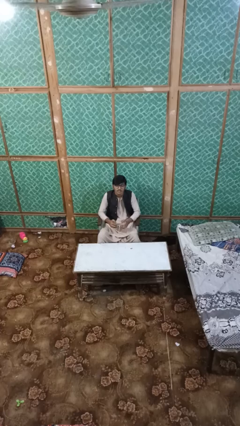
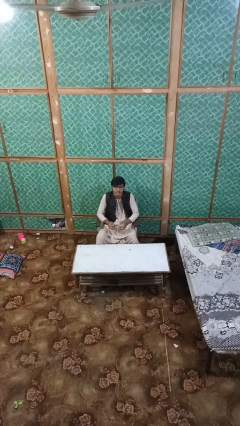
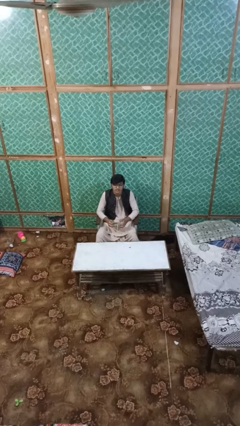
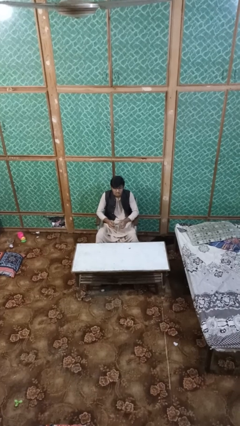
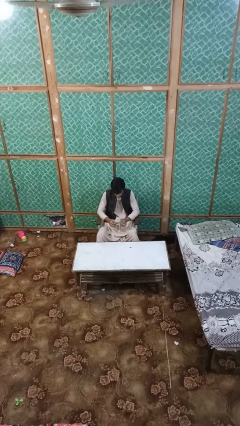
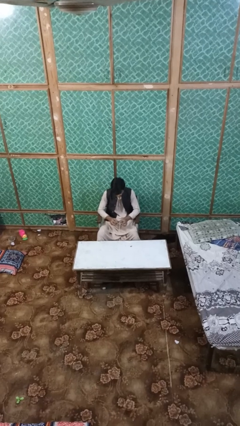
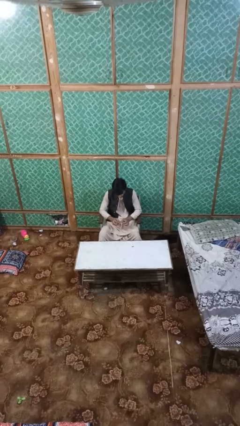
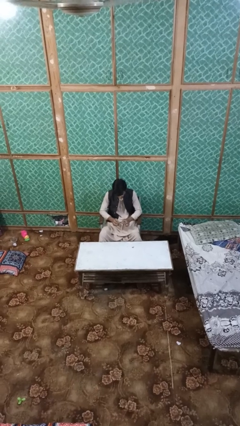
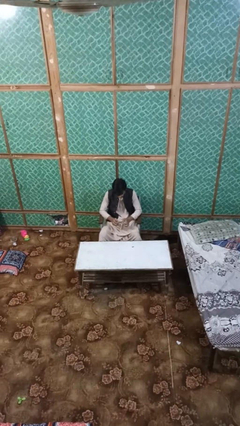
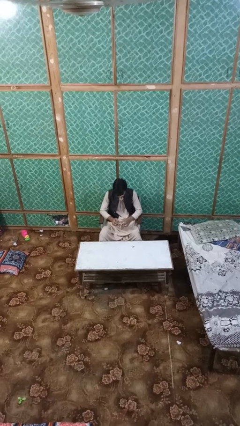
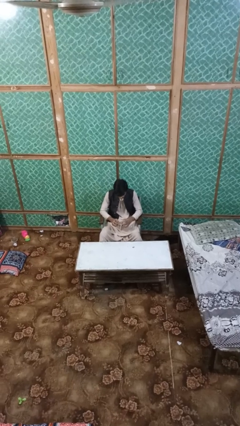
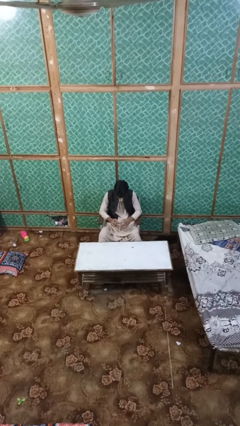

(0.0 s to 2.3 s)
person interacts with handheld game

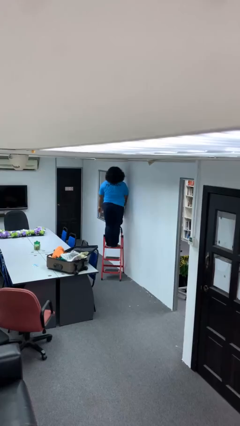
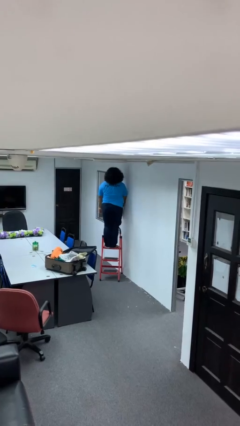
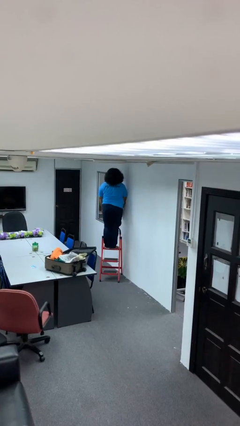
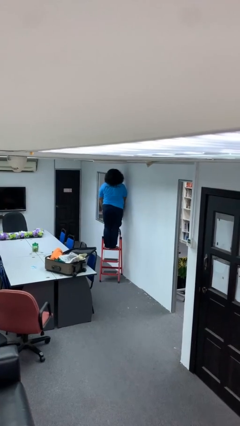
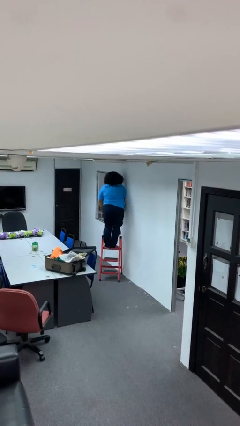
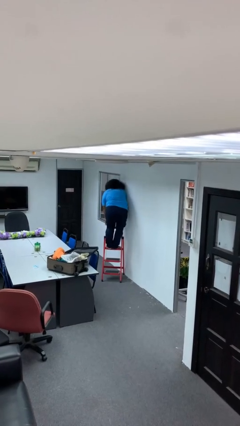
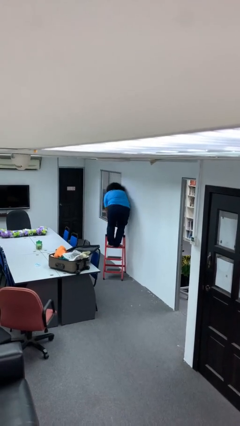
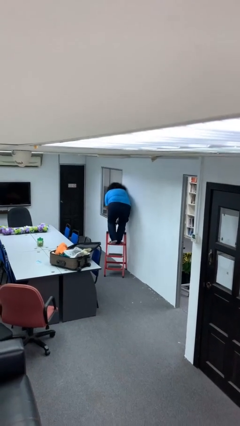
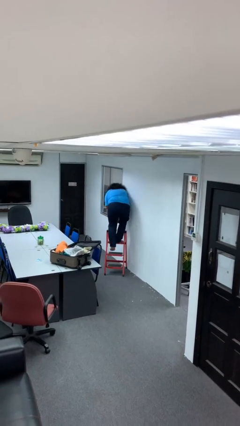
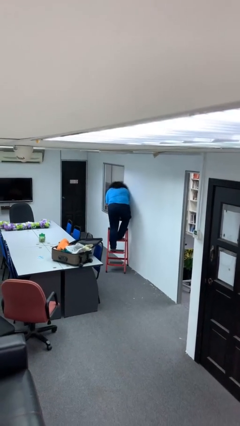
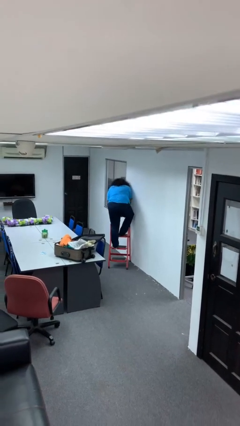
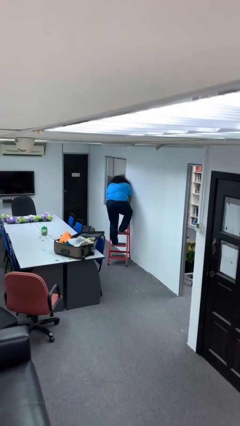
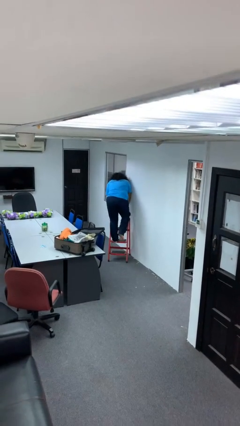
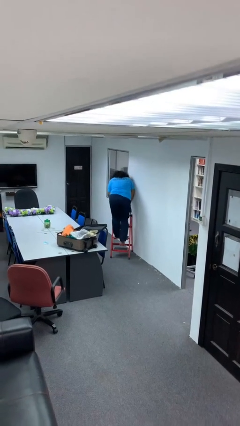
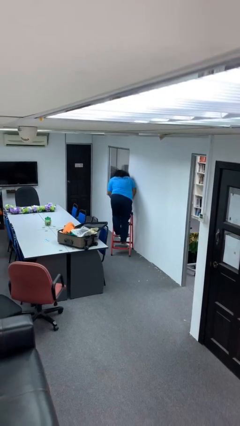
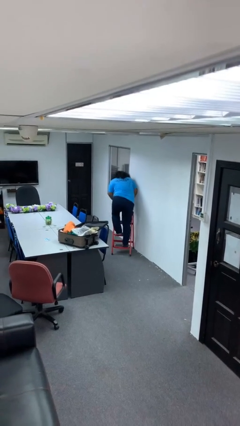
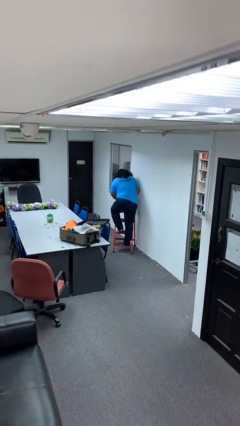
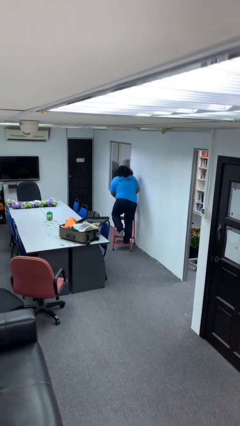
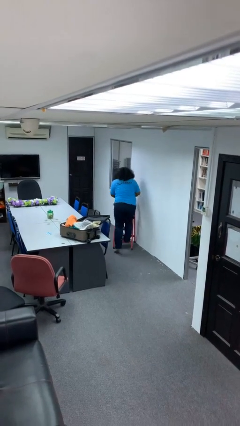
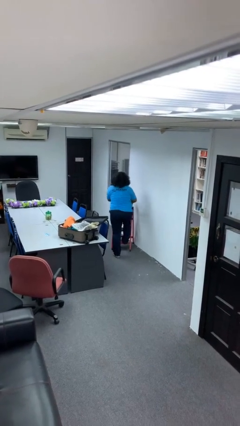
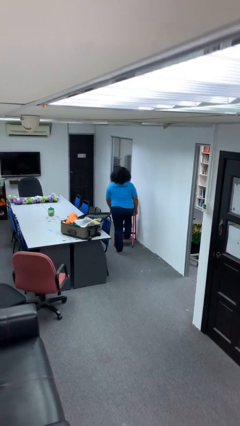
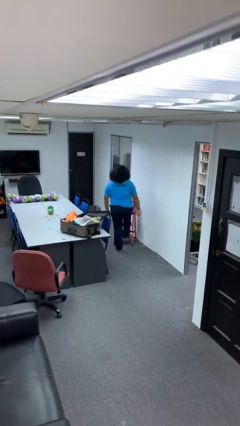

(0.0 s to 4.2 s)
person climbs down ladder

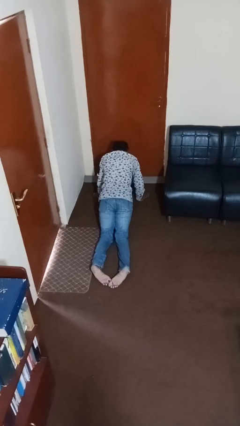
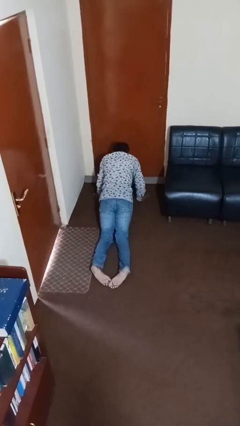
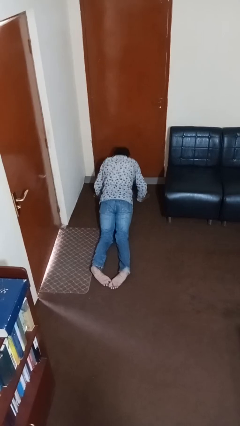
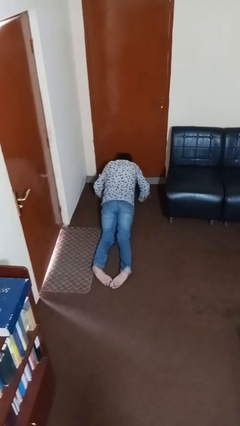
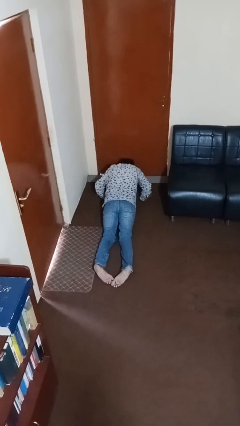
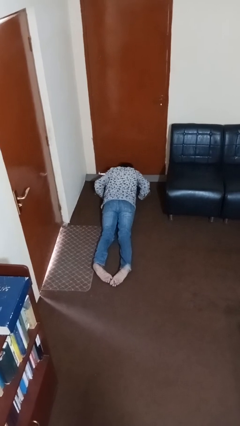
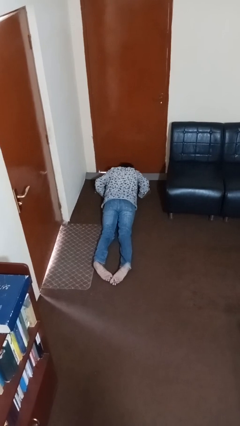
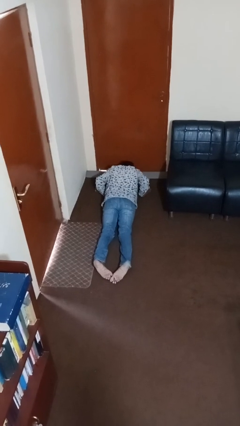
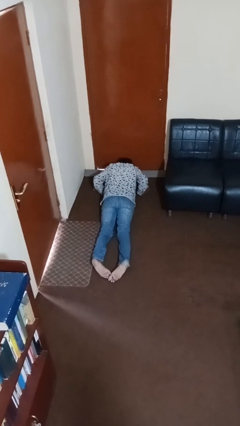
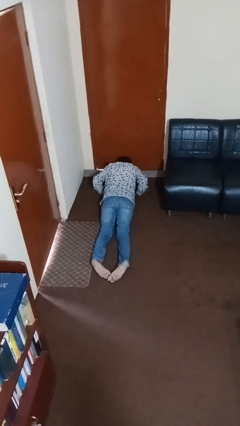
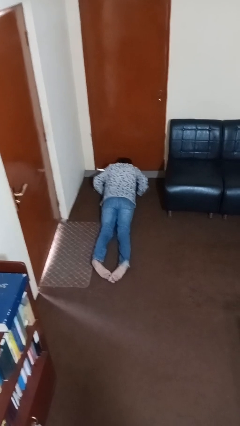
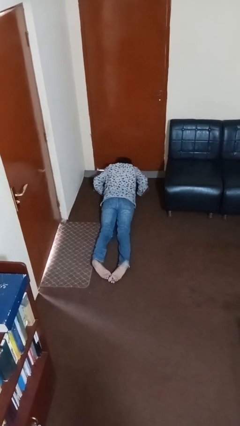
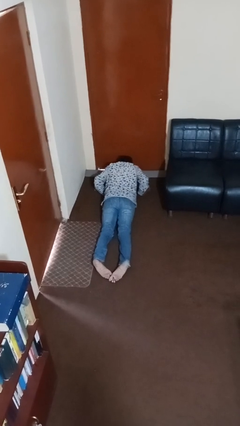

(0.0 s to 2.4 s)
person exercises with pushup

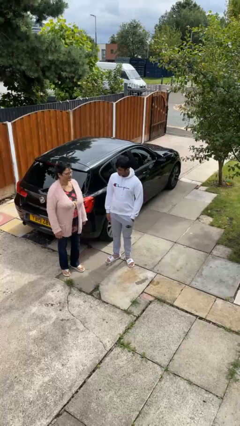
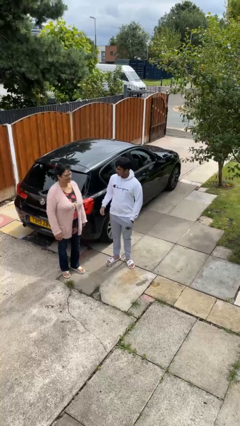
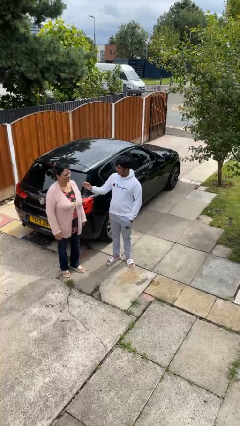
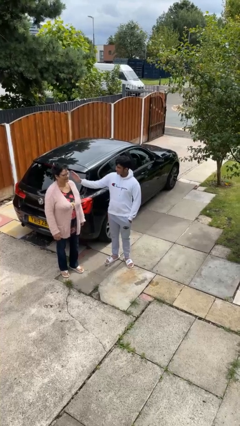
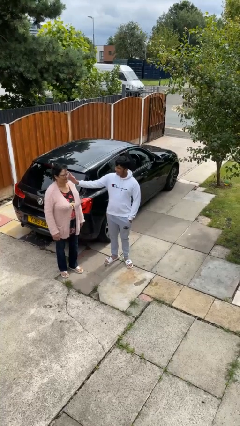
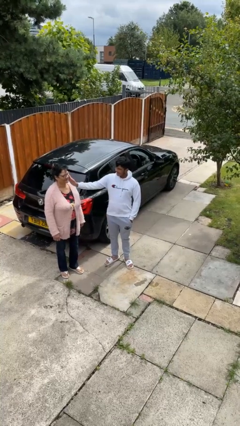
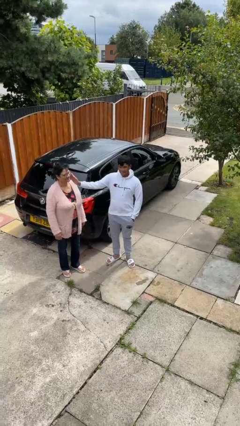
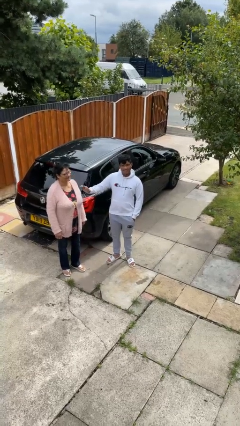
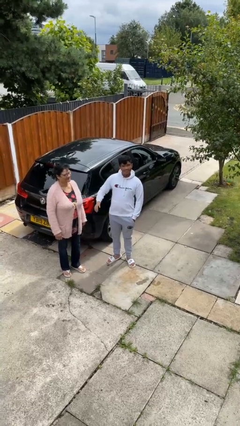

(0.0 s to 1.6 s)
person touches face of person

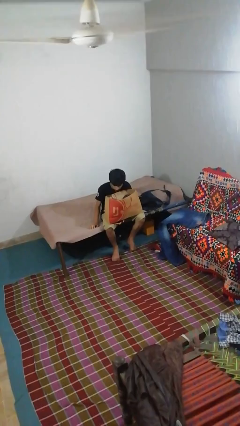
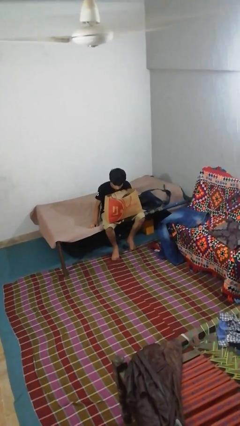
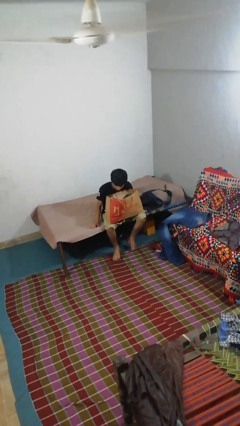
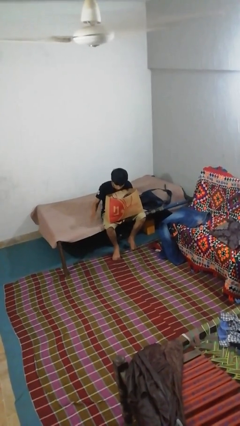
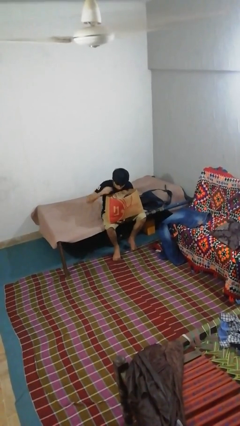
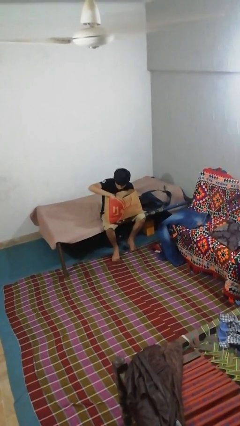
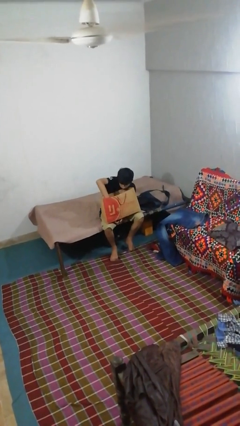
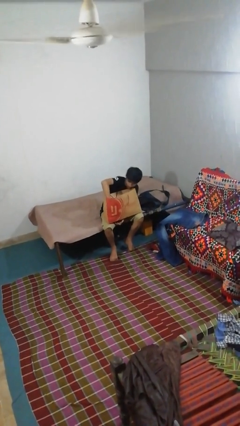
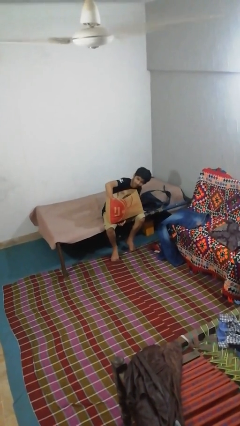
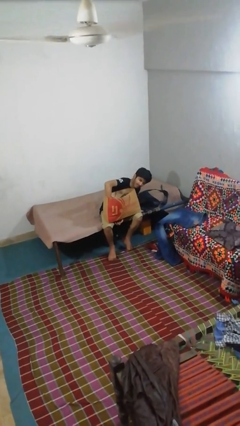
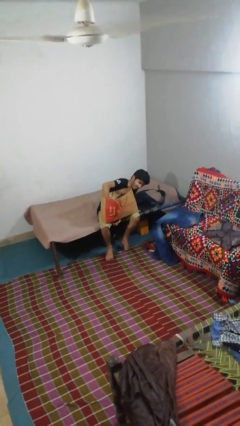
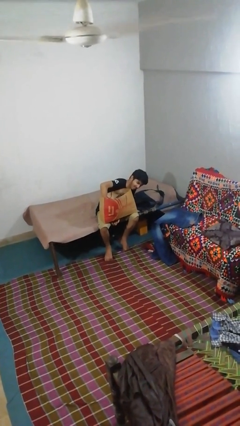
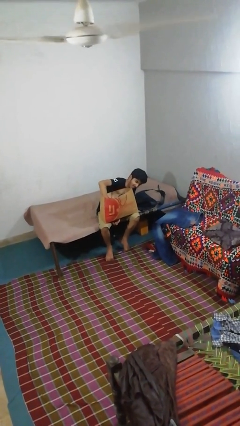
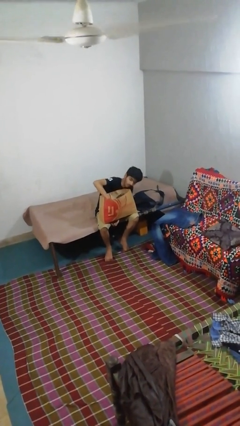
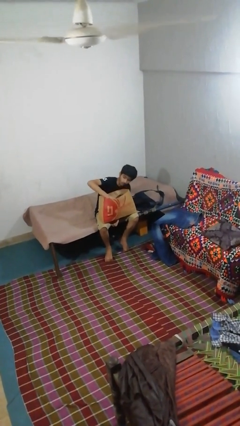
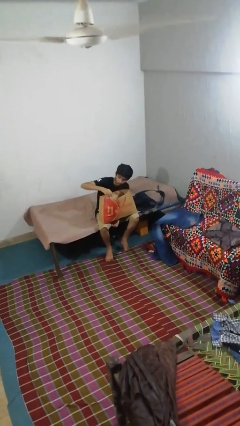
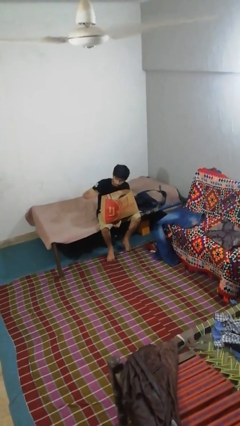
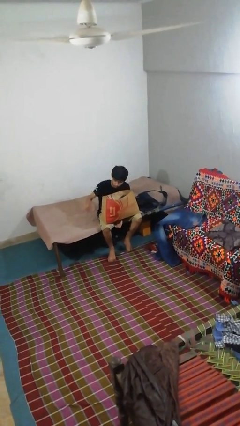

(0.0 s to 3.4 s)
person searches in bag

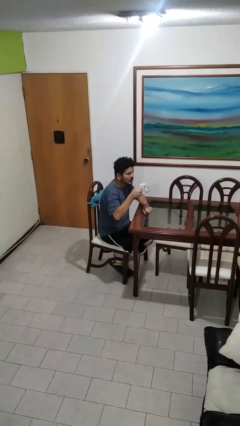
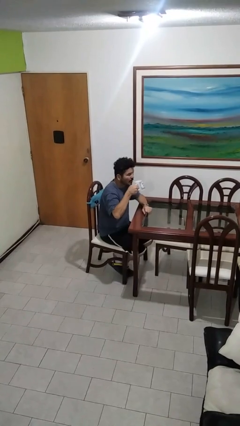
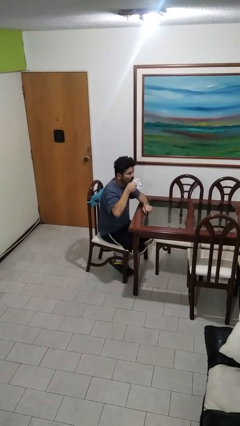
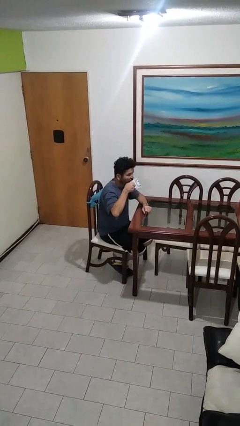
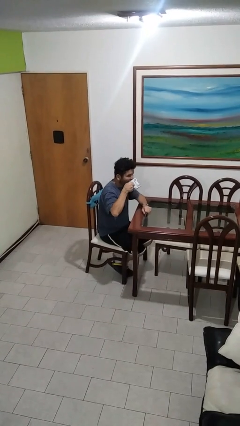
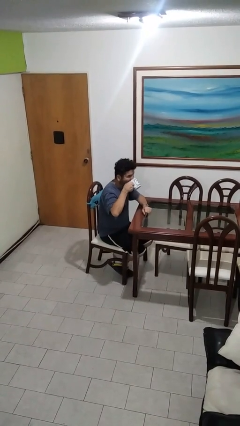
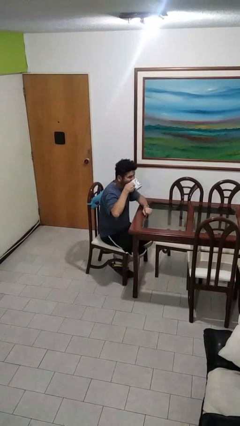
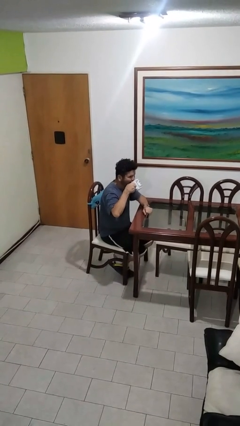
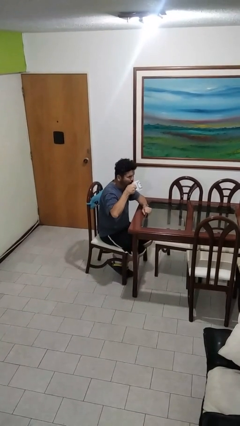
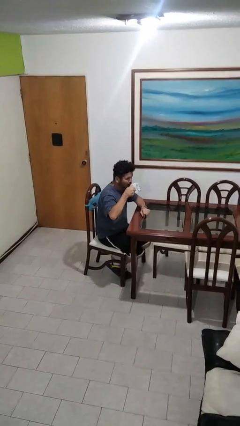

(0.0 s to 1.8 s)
person drinks from mug

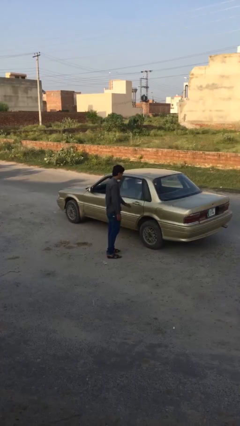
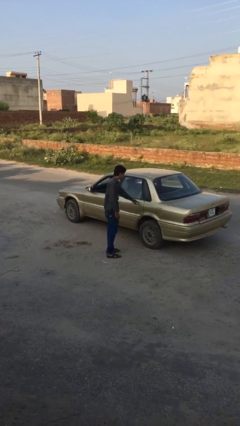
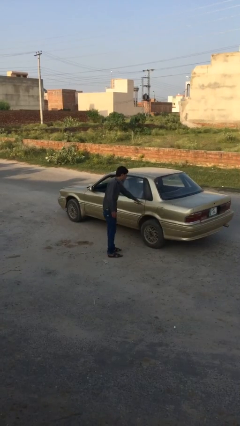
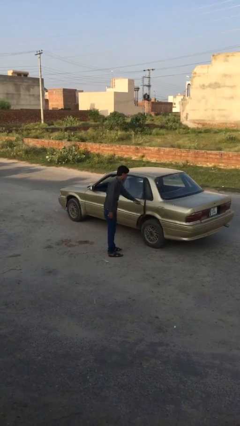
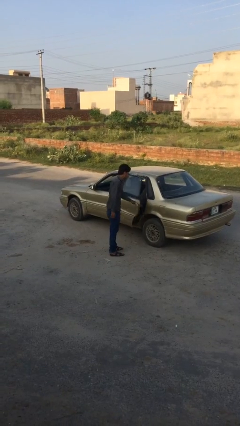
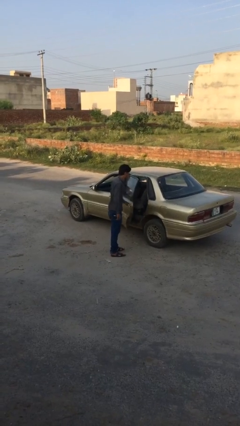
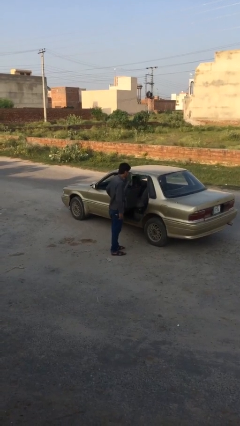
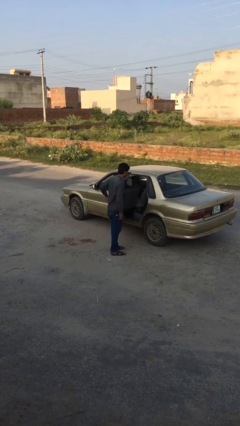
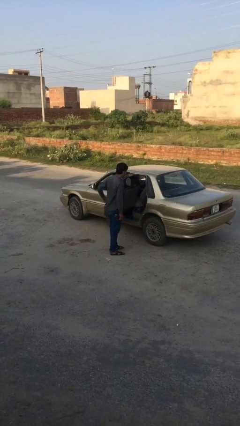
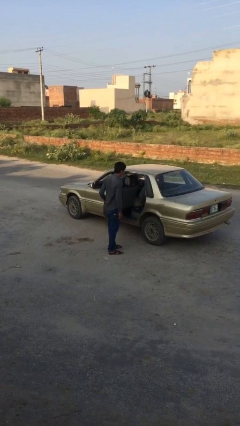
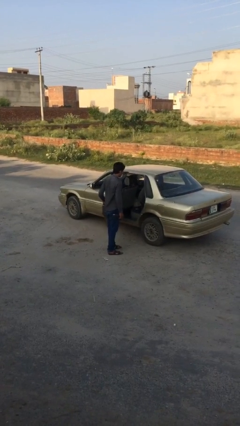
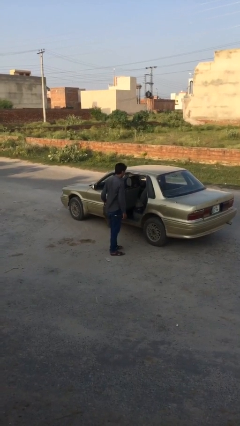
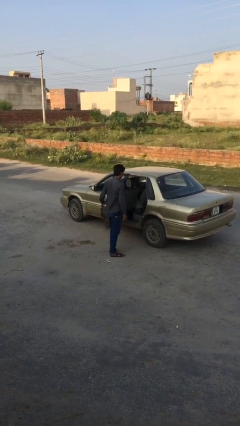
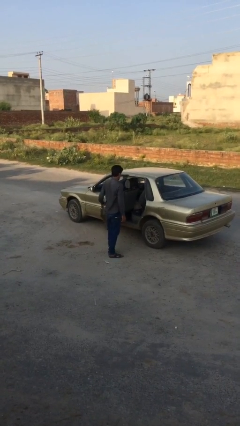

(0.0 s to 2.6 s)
person opens car door
